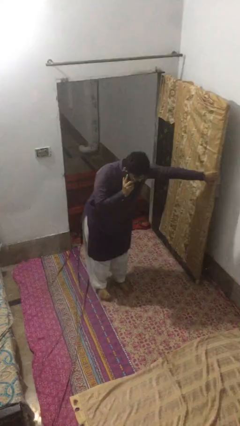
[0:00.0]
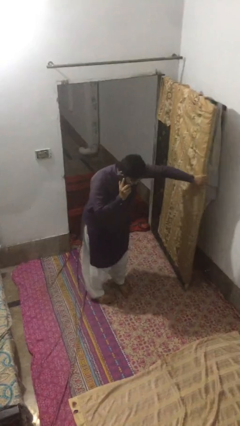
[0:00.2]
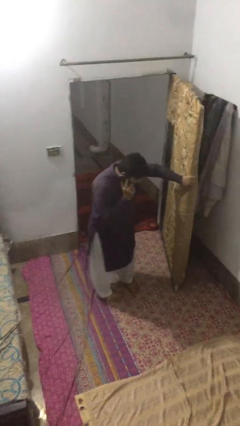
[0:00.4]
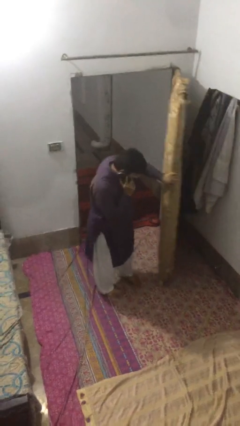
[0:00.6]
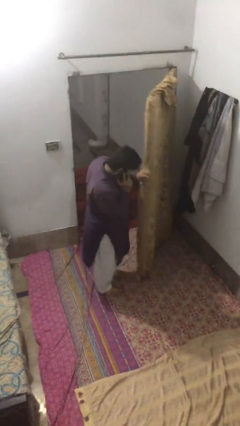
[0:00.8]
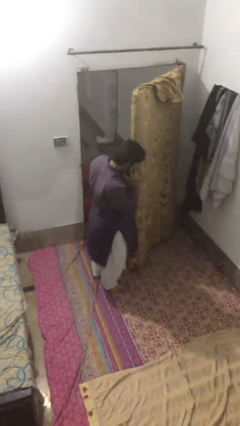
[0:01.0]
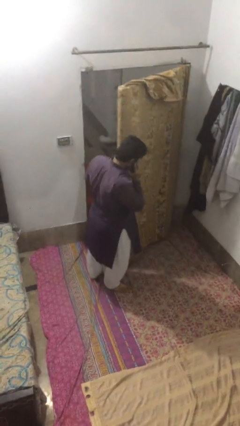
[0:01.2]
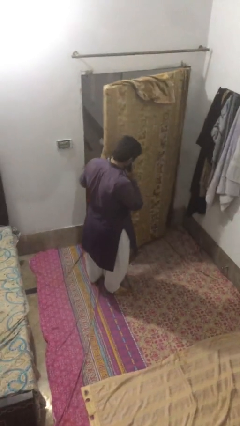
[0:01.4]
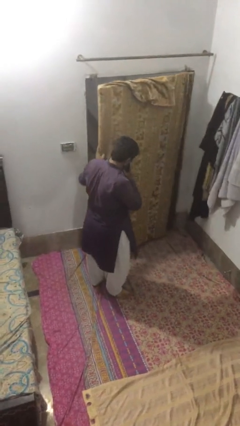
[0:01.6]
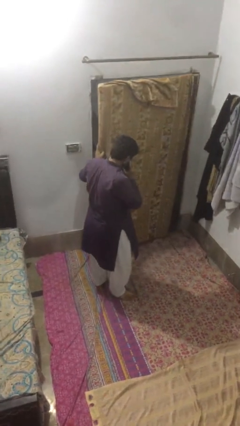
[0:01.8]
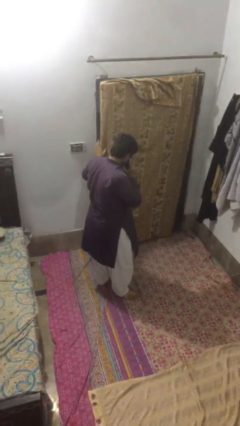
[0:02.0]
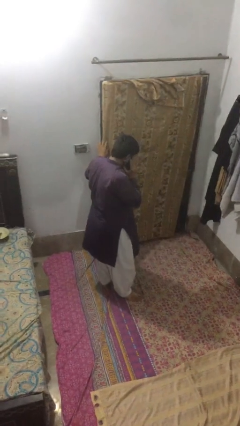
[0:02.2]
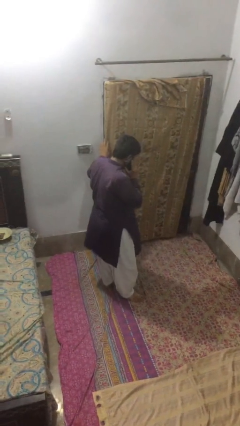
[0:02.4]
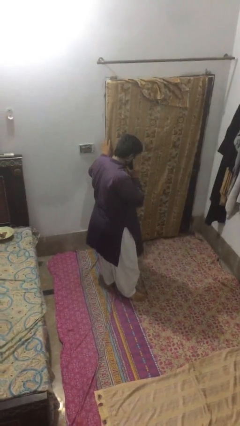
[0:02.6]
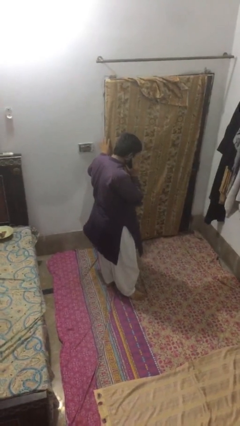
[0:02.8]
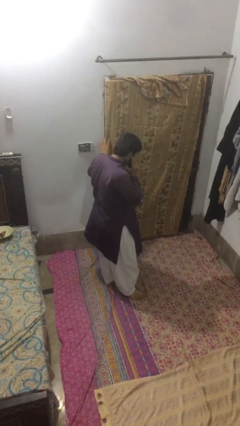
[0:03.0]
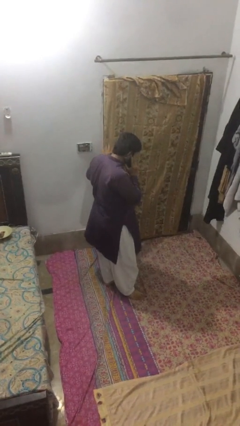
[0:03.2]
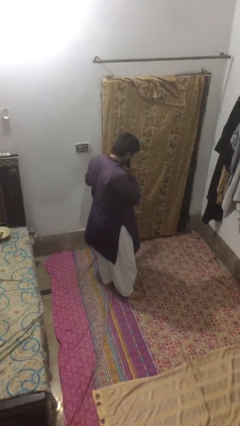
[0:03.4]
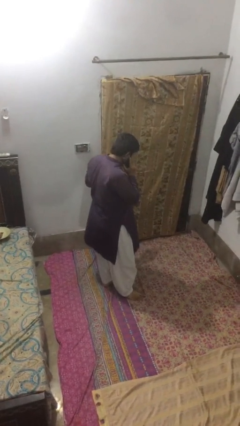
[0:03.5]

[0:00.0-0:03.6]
person closes facility door

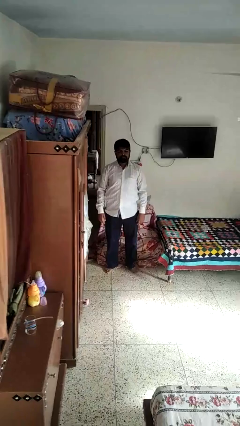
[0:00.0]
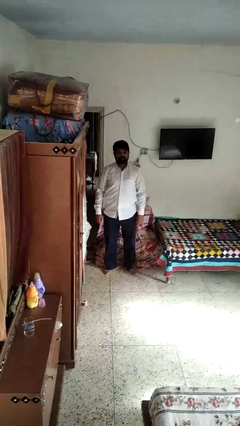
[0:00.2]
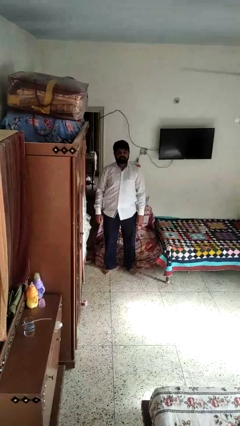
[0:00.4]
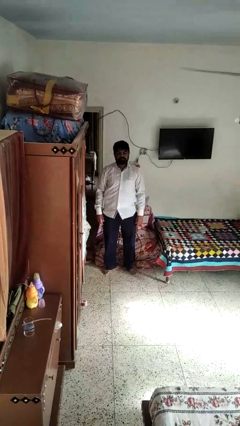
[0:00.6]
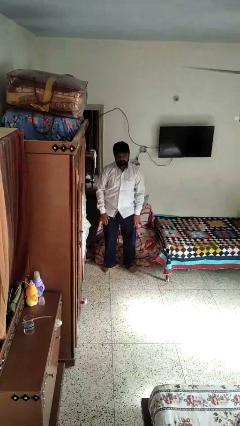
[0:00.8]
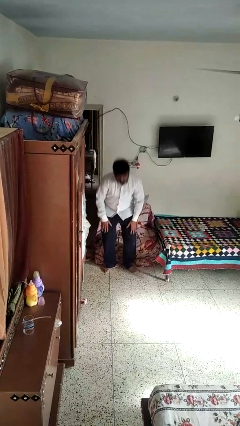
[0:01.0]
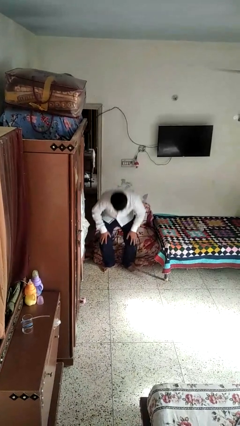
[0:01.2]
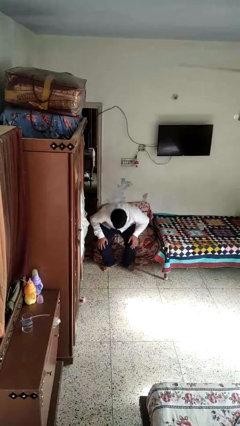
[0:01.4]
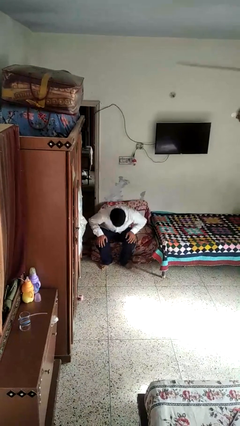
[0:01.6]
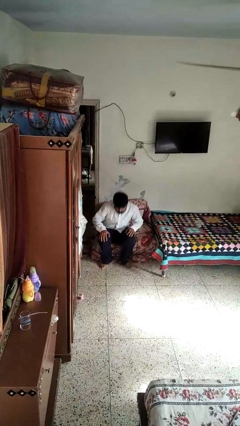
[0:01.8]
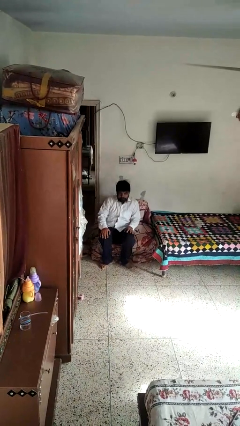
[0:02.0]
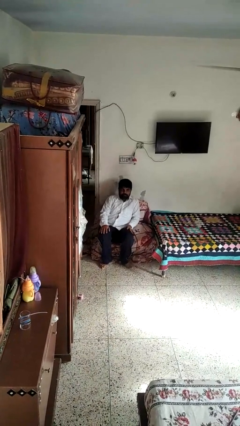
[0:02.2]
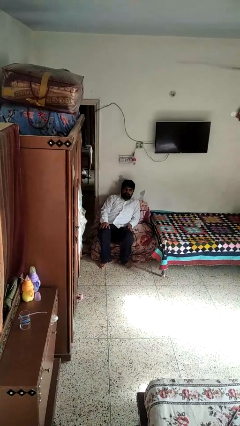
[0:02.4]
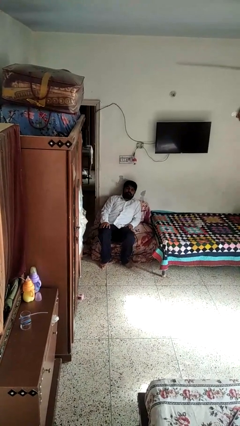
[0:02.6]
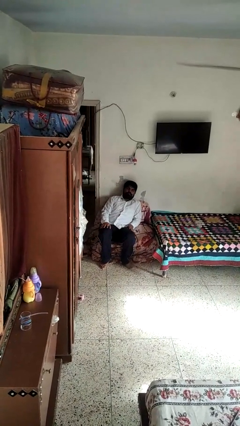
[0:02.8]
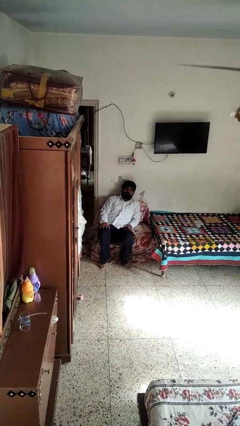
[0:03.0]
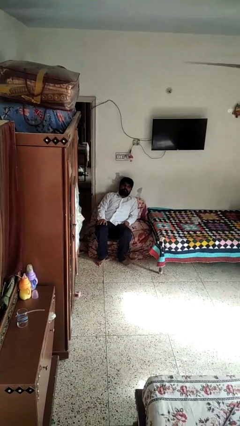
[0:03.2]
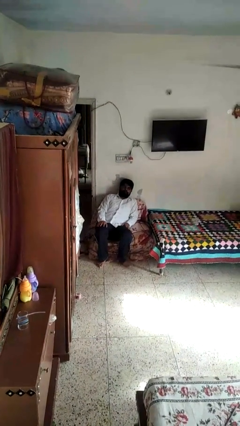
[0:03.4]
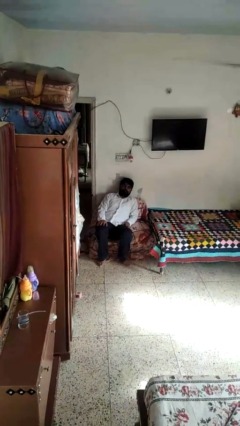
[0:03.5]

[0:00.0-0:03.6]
person lies down on couch

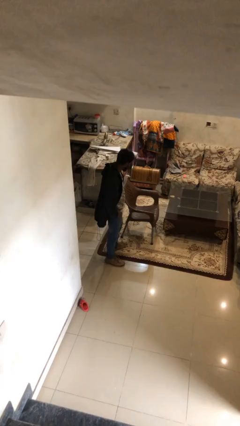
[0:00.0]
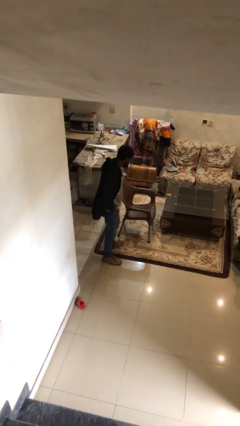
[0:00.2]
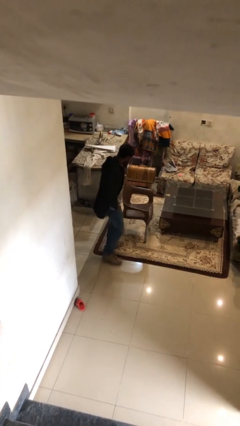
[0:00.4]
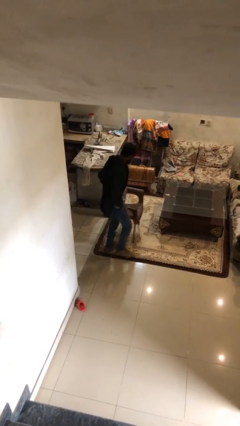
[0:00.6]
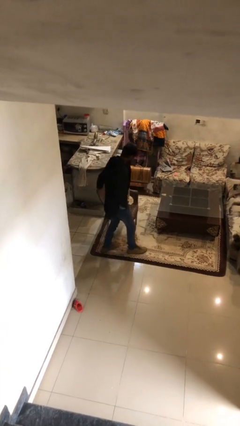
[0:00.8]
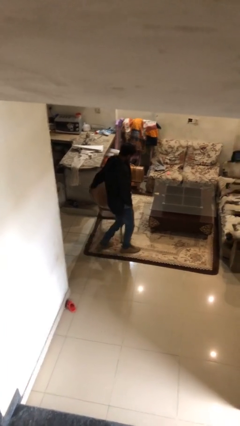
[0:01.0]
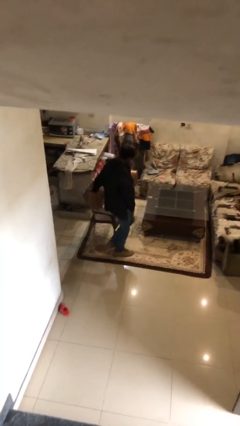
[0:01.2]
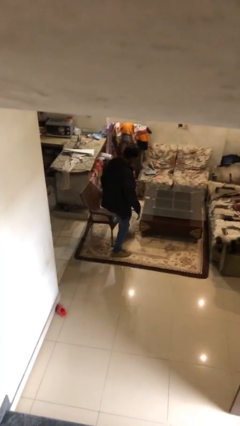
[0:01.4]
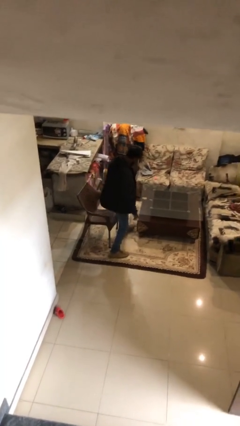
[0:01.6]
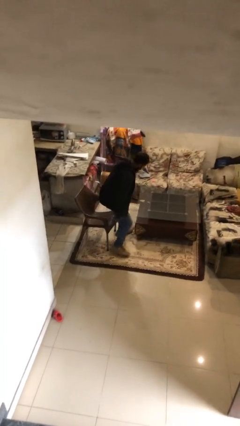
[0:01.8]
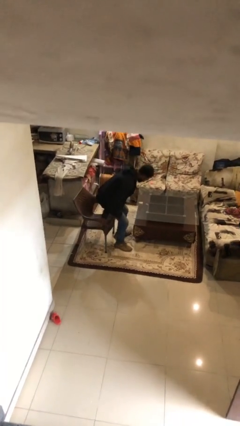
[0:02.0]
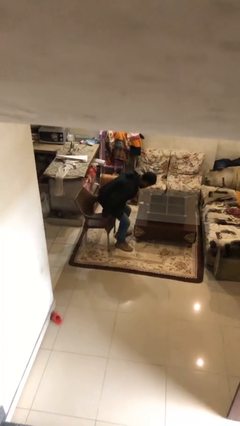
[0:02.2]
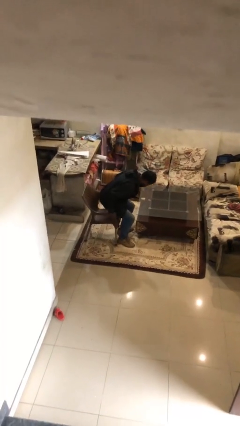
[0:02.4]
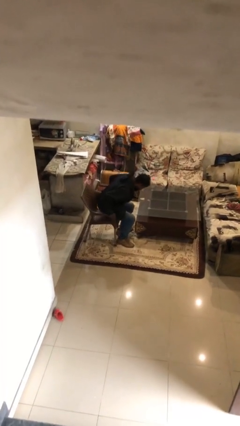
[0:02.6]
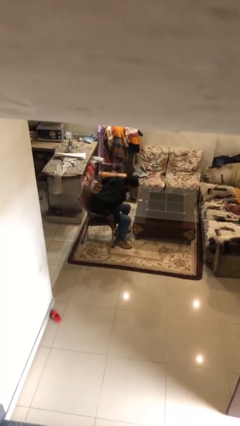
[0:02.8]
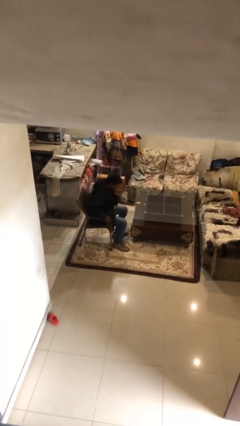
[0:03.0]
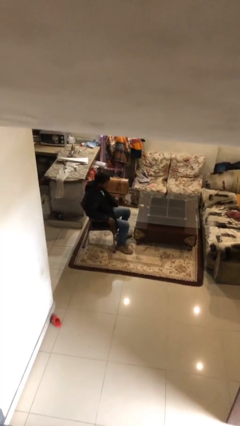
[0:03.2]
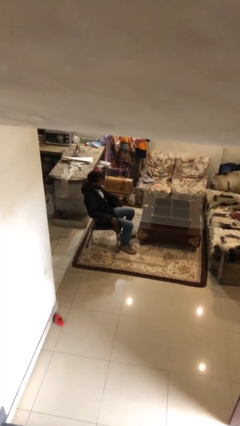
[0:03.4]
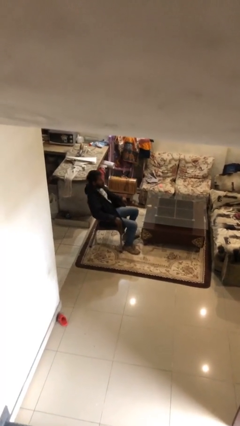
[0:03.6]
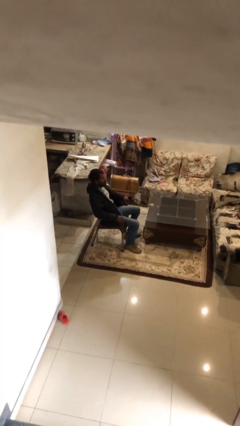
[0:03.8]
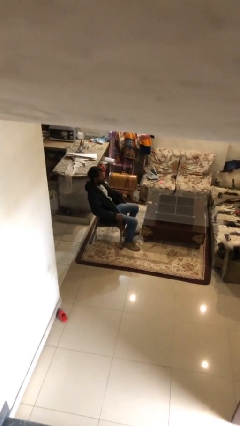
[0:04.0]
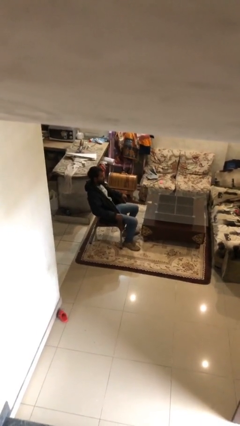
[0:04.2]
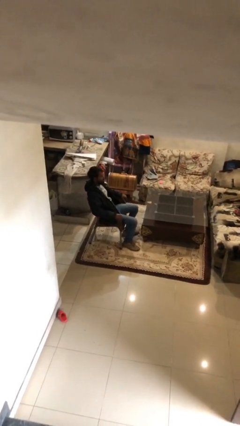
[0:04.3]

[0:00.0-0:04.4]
person sits down

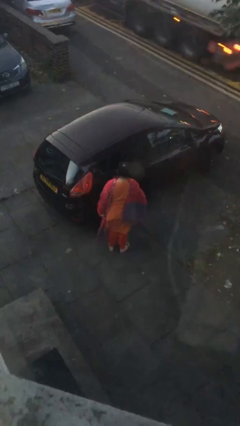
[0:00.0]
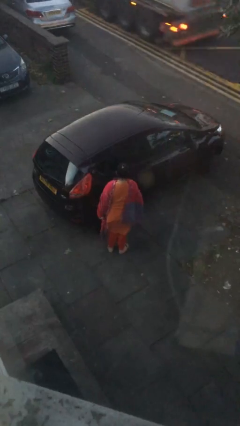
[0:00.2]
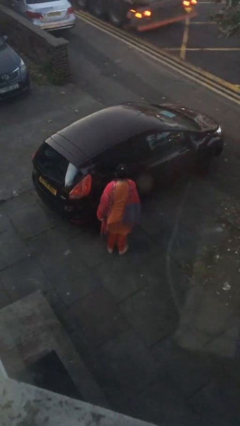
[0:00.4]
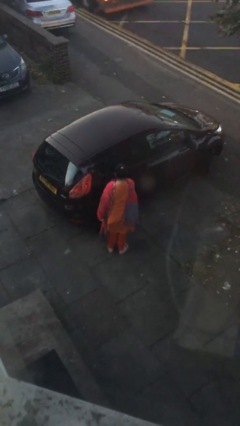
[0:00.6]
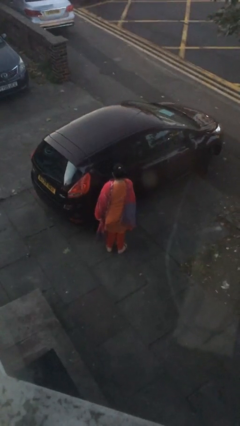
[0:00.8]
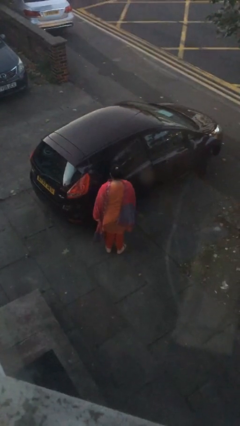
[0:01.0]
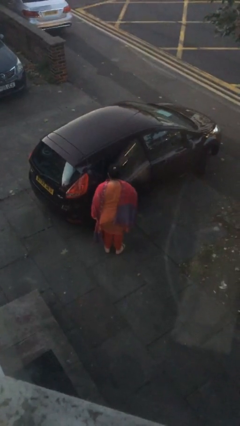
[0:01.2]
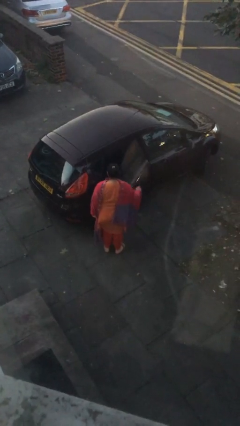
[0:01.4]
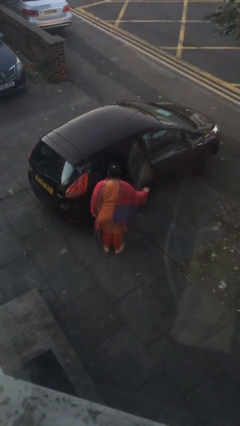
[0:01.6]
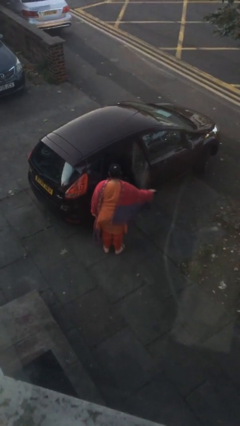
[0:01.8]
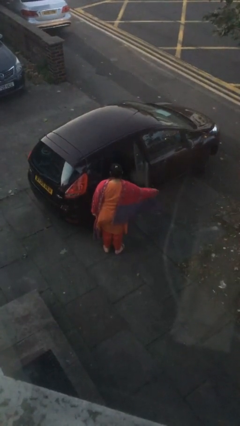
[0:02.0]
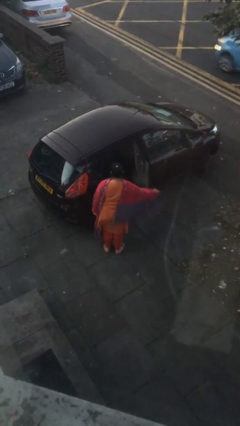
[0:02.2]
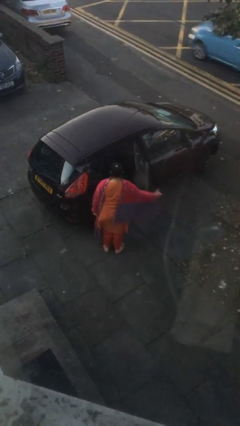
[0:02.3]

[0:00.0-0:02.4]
person opens car door

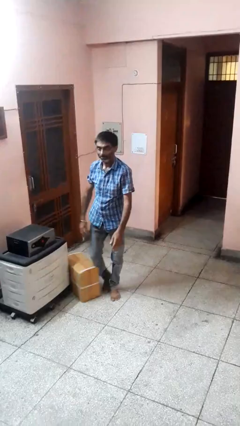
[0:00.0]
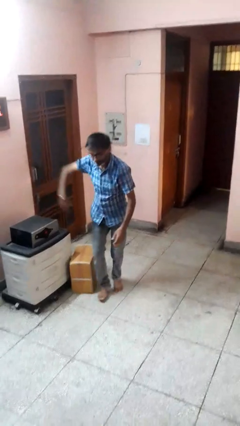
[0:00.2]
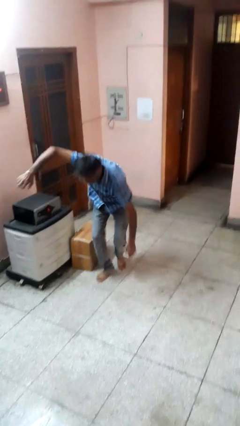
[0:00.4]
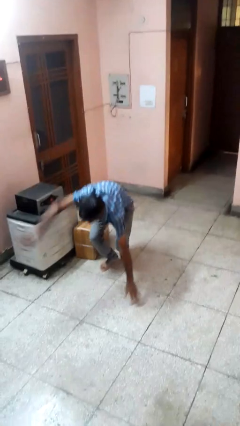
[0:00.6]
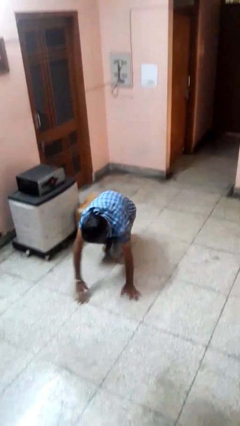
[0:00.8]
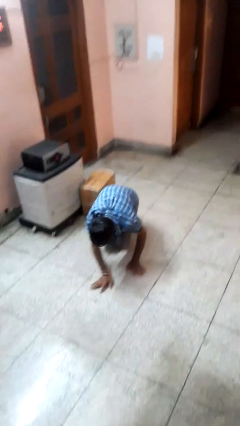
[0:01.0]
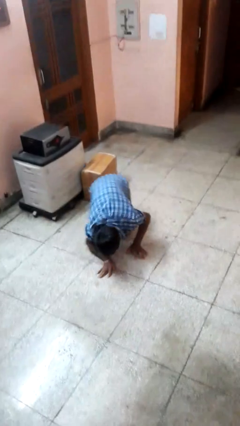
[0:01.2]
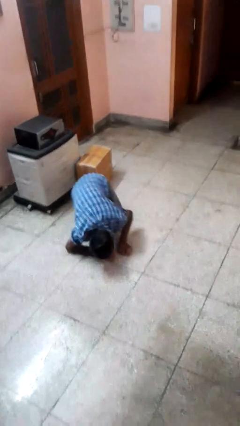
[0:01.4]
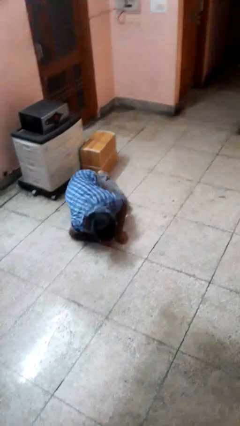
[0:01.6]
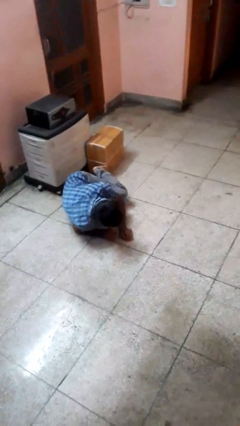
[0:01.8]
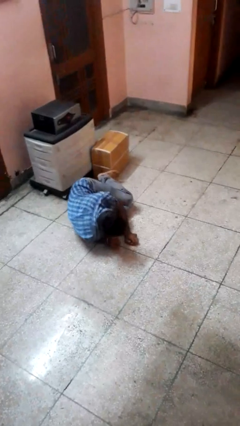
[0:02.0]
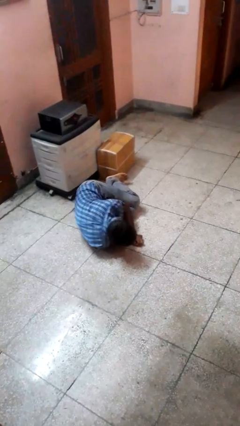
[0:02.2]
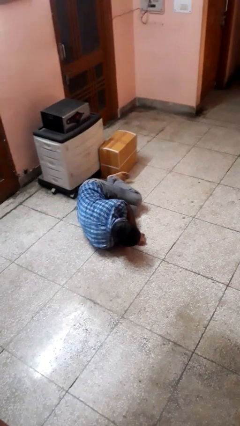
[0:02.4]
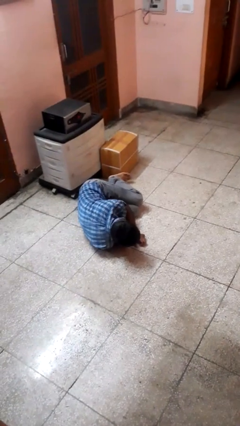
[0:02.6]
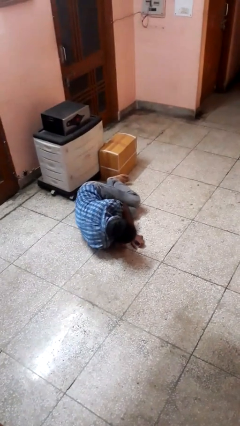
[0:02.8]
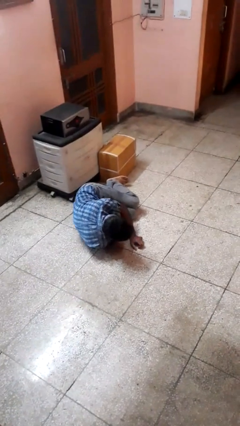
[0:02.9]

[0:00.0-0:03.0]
person trips on object on floor

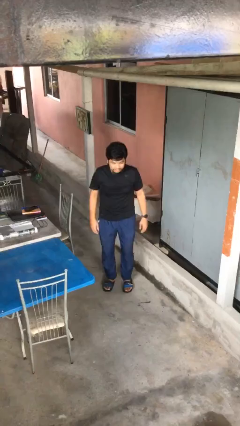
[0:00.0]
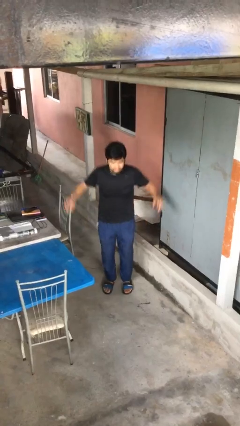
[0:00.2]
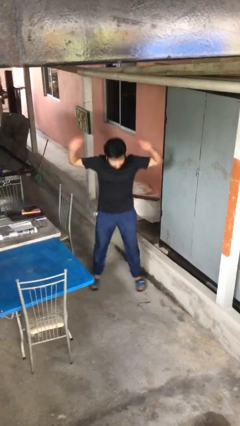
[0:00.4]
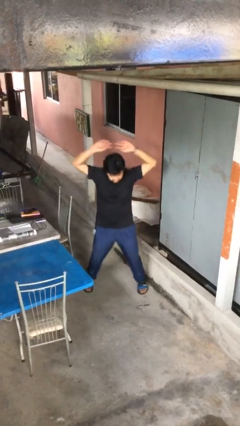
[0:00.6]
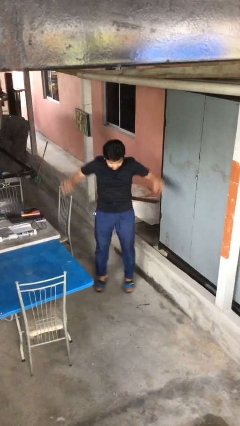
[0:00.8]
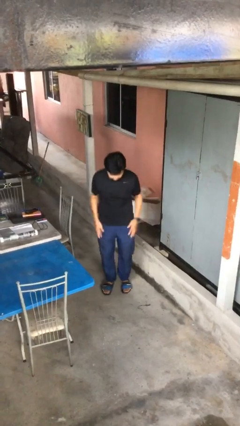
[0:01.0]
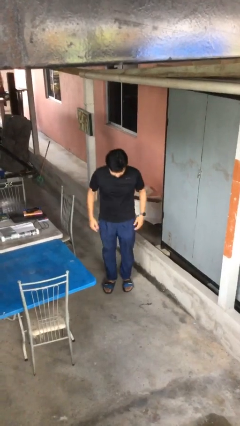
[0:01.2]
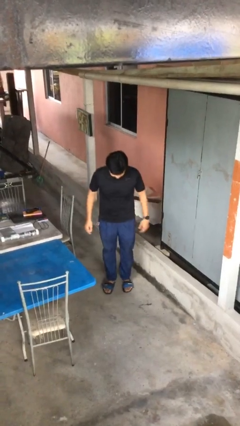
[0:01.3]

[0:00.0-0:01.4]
person exercises with jumping jacks
